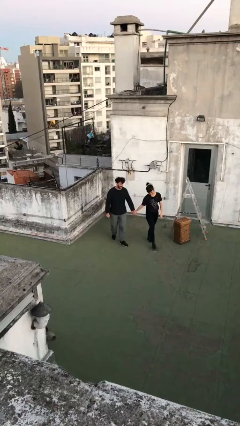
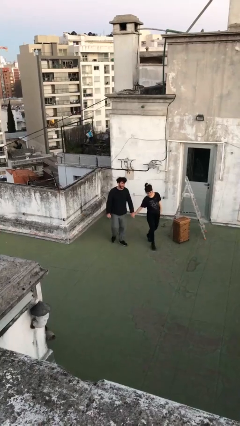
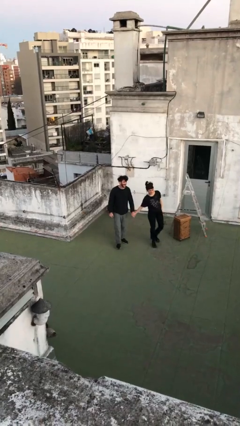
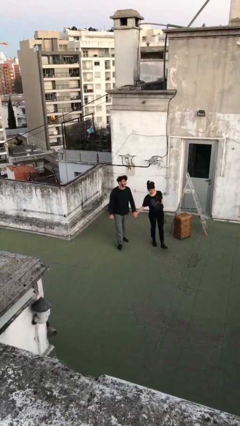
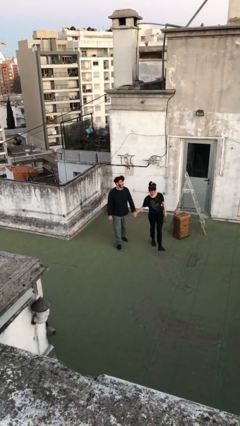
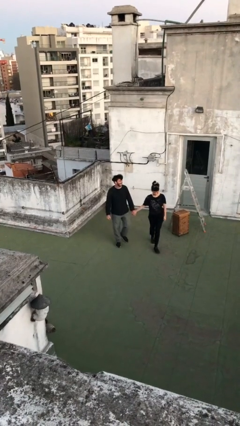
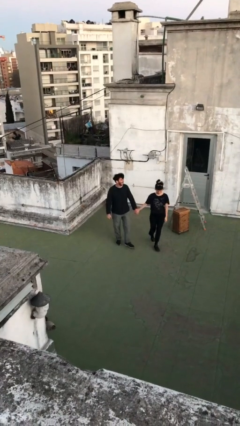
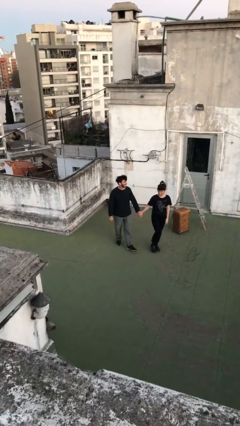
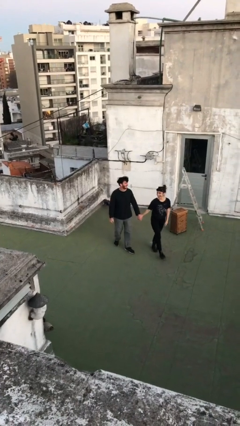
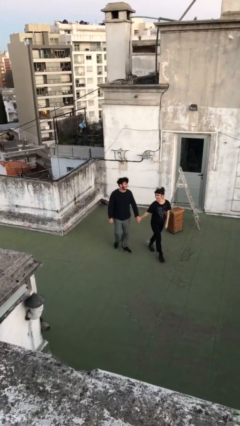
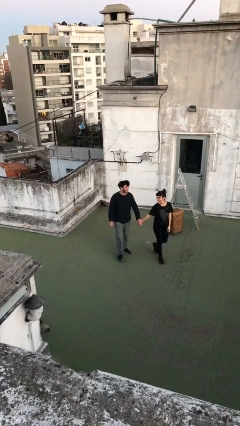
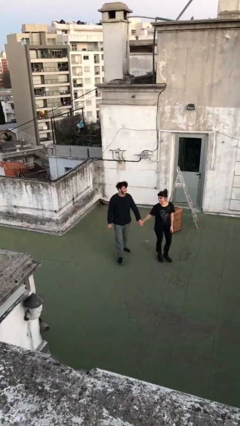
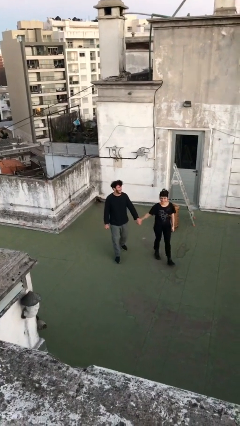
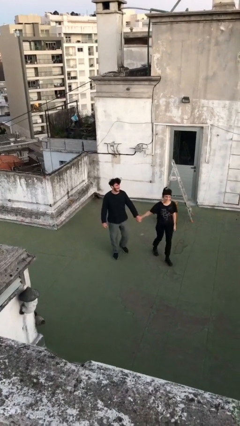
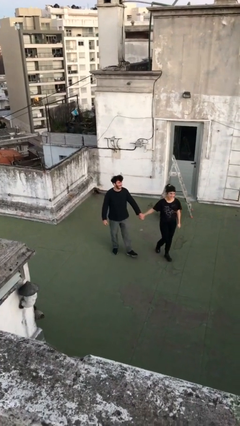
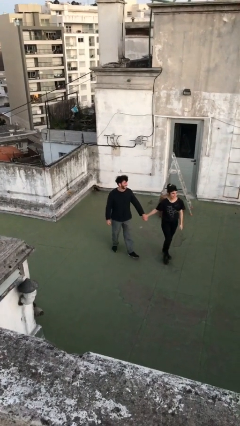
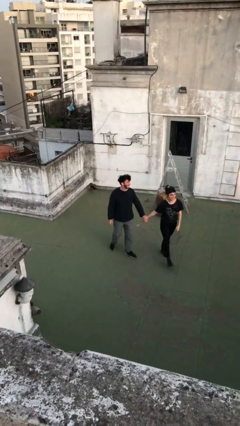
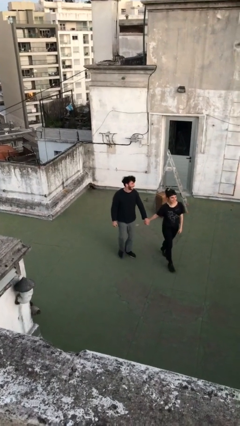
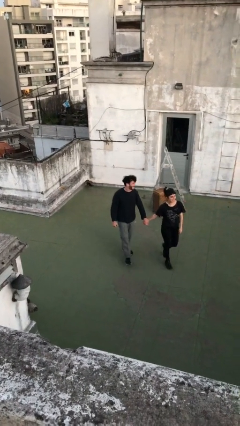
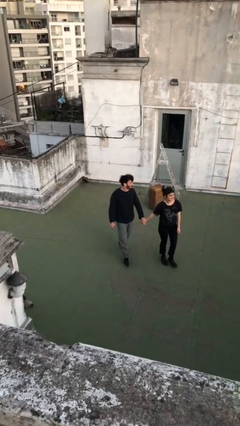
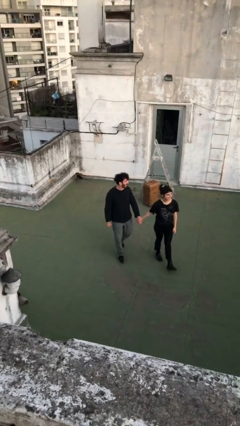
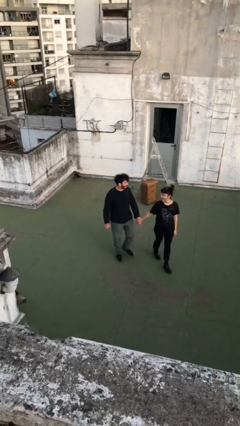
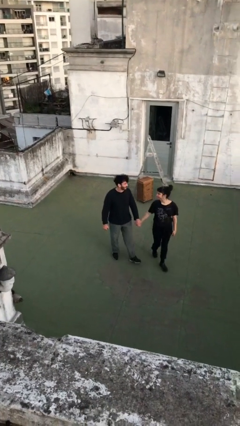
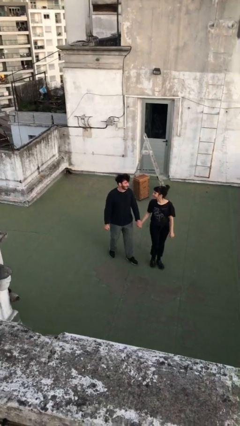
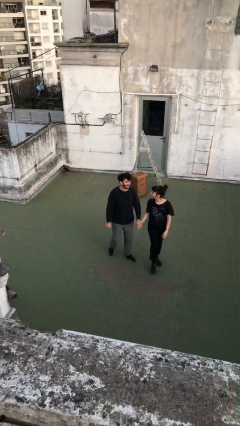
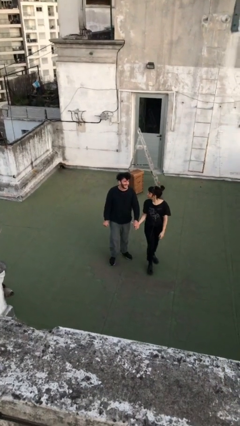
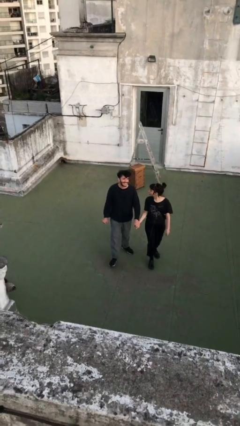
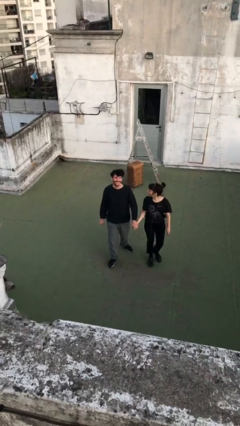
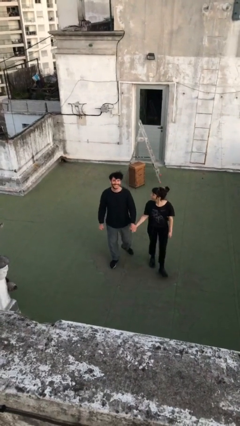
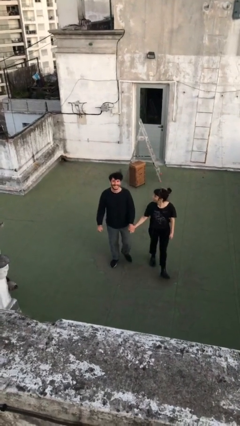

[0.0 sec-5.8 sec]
person holds hand

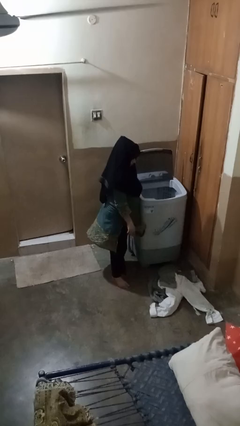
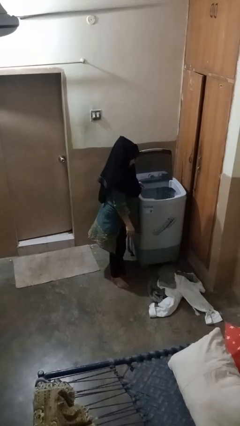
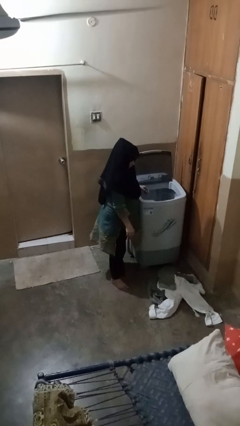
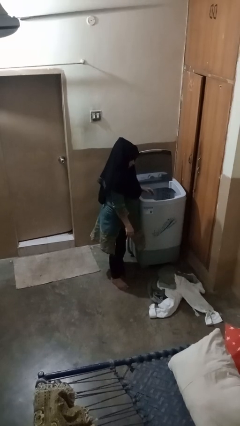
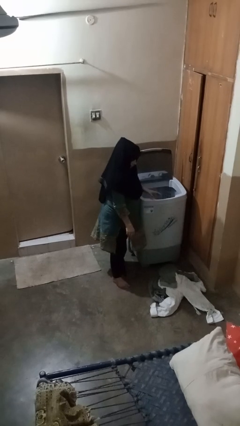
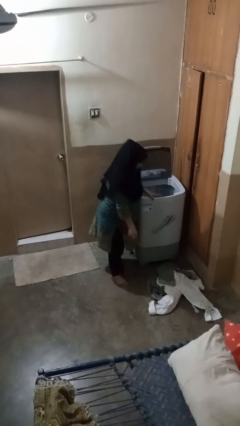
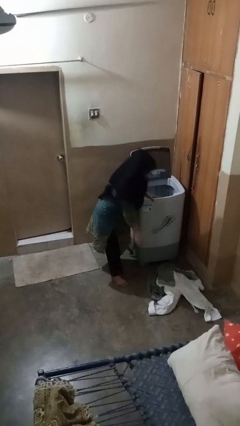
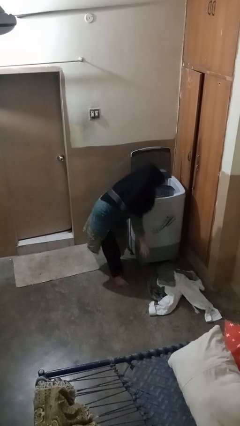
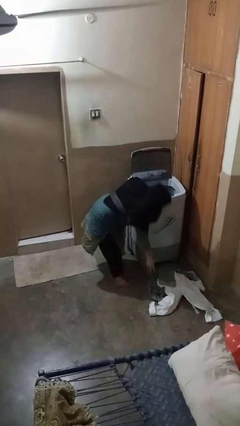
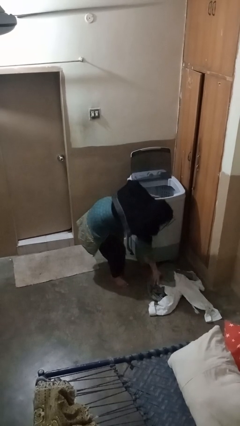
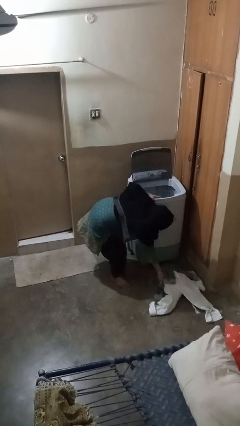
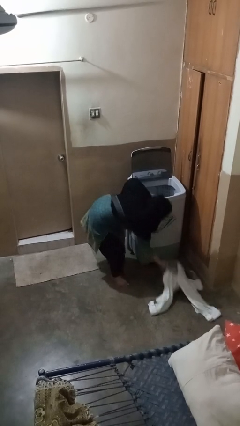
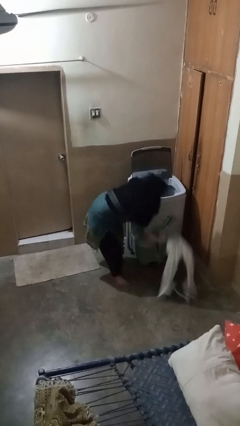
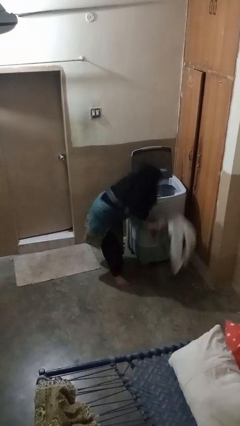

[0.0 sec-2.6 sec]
person loads clotheswasher

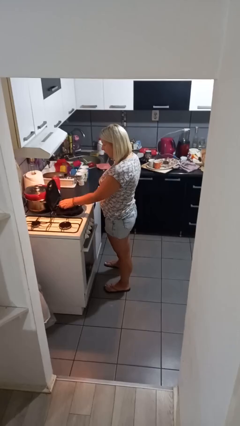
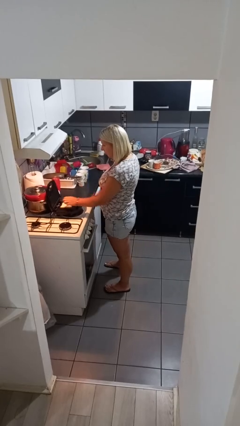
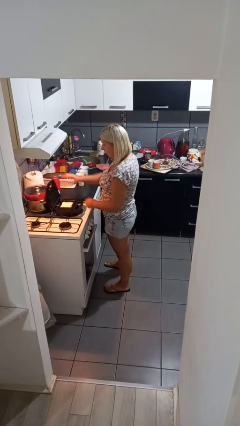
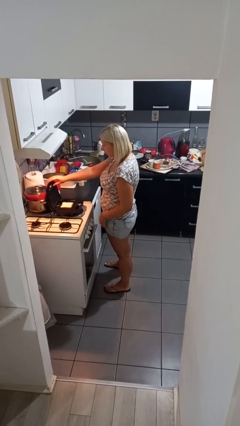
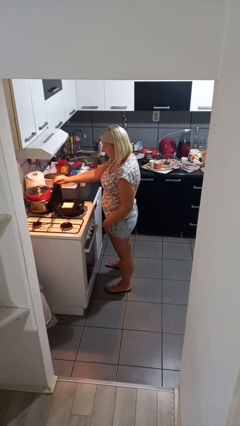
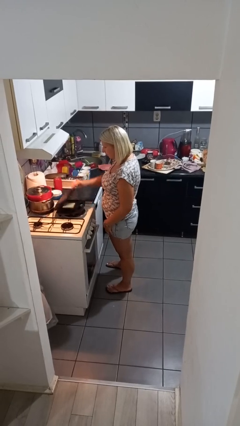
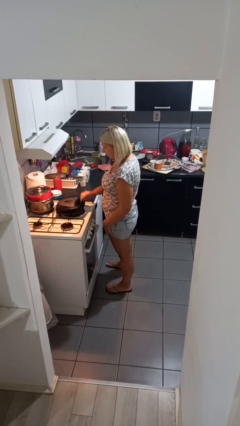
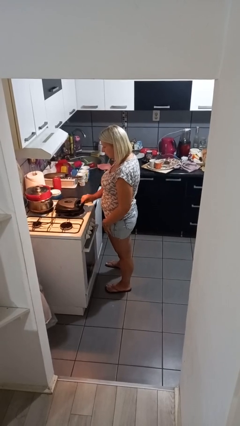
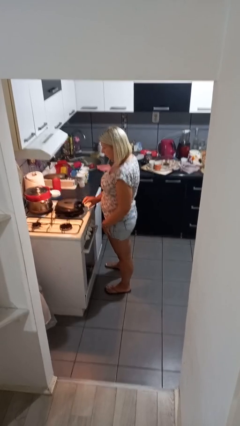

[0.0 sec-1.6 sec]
person puts object into toaster

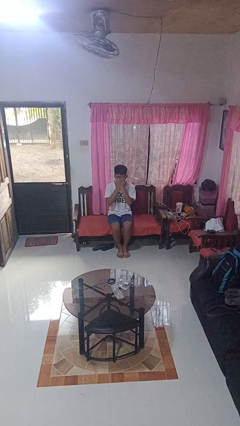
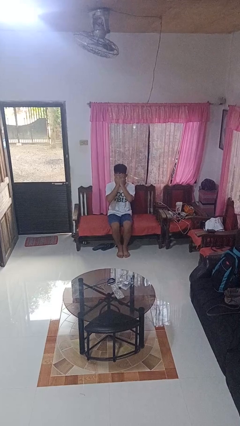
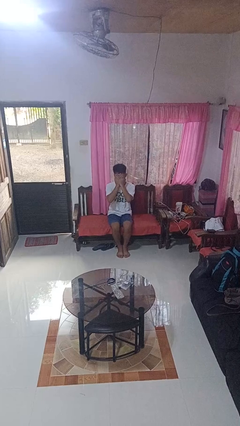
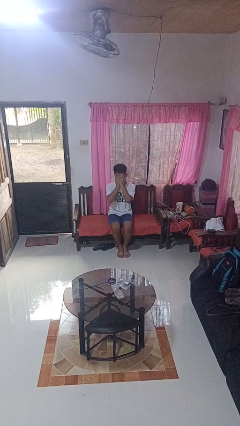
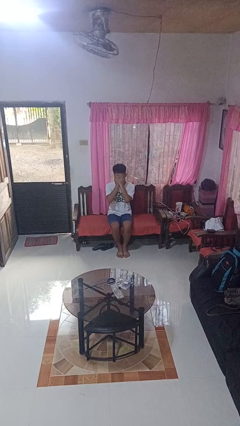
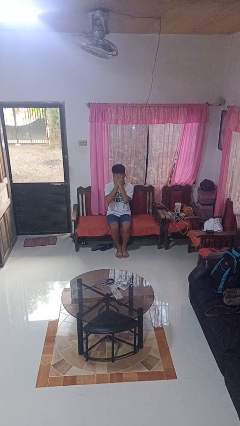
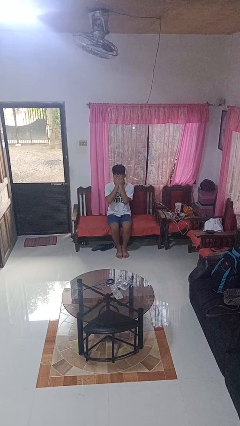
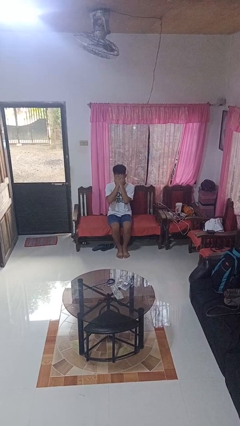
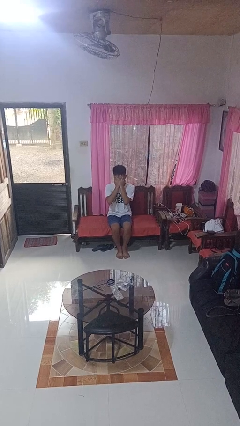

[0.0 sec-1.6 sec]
person covers face with hands

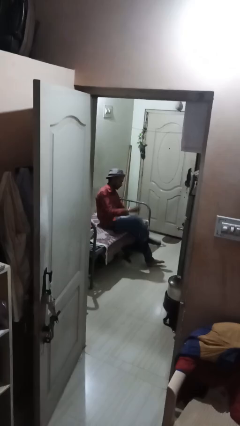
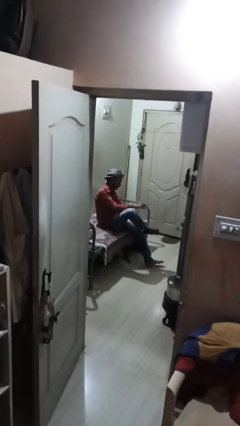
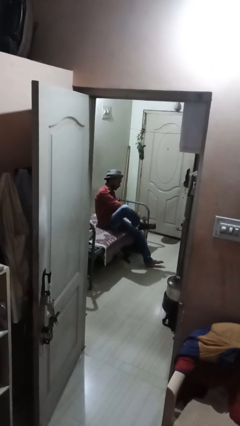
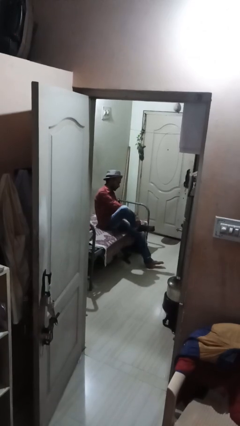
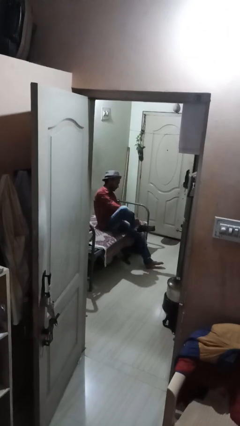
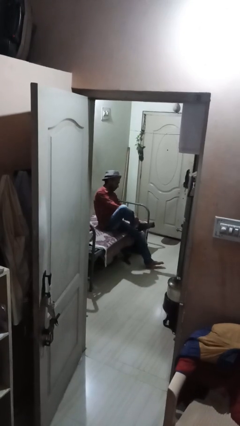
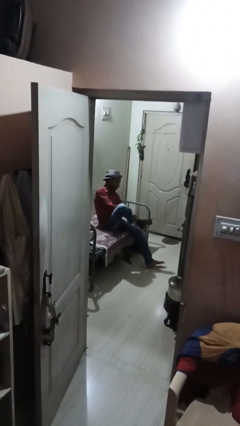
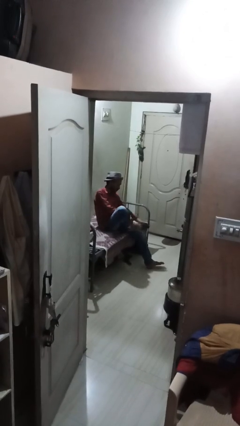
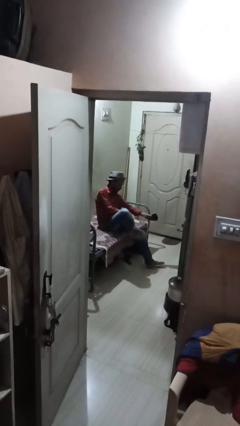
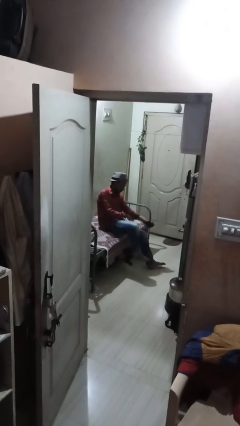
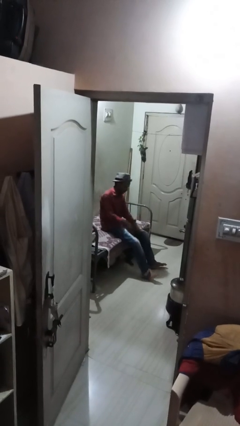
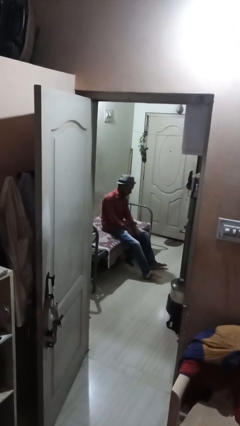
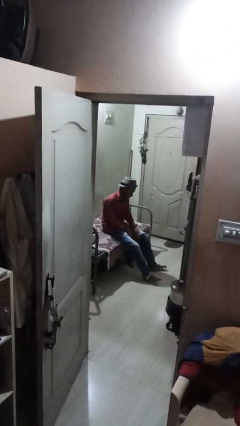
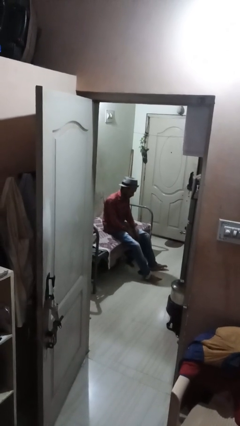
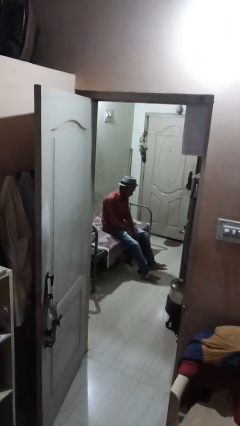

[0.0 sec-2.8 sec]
person takes off socks

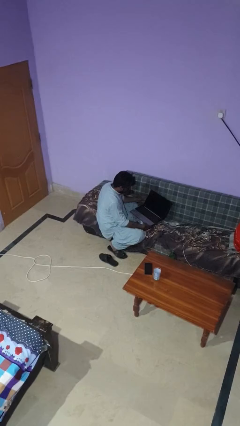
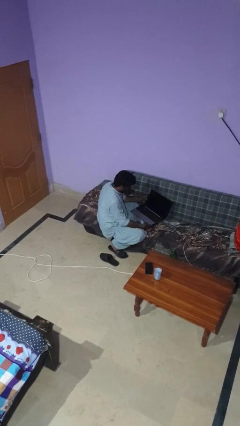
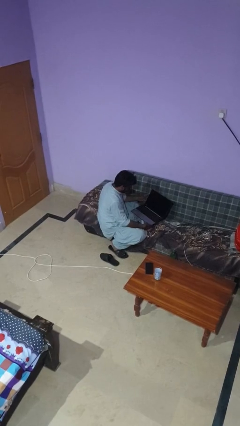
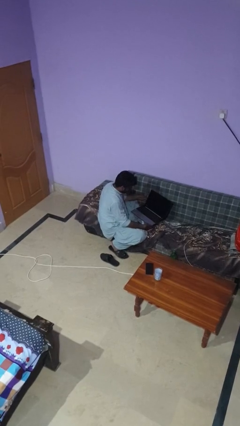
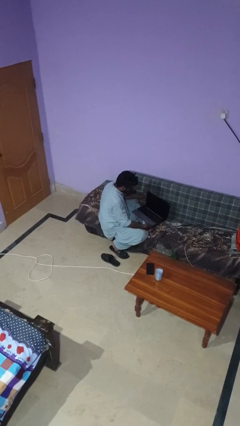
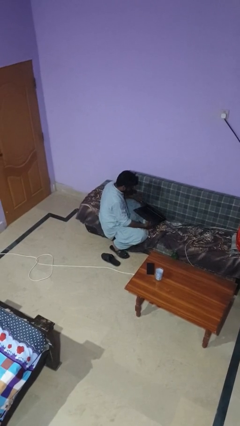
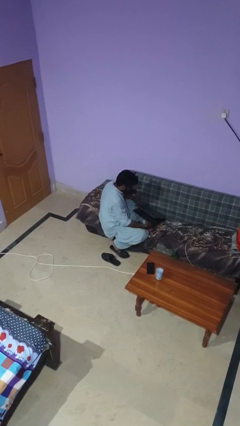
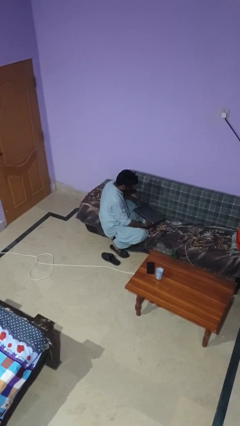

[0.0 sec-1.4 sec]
person closes laptop

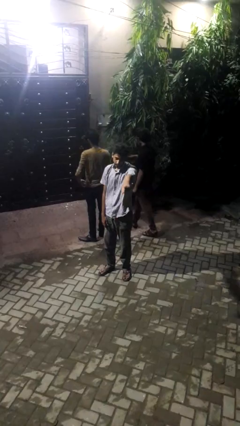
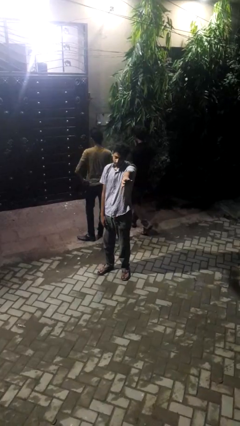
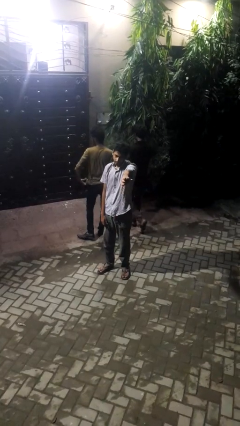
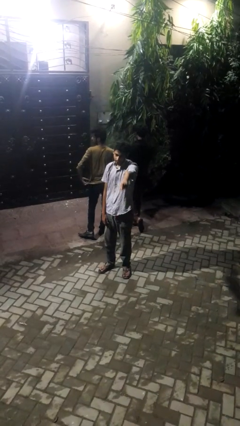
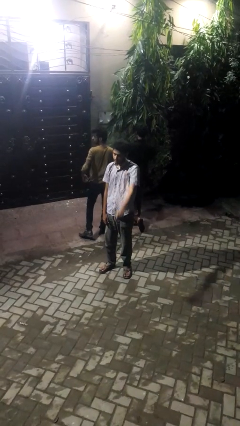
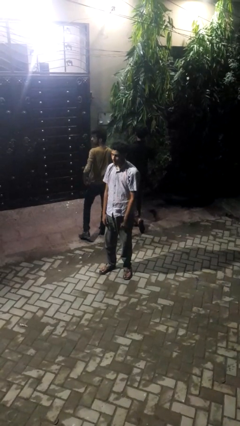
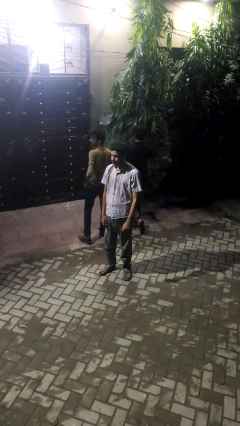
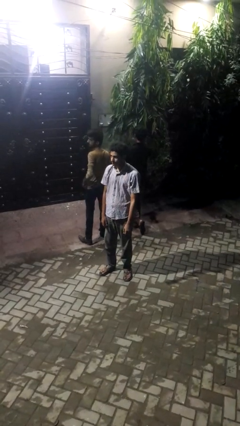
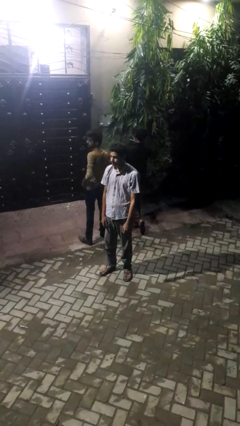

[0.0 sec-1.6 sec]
person points at person
